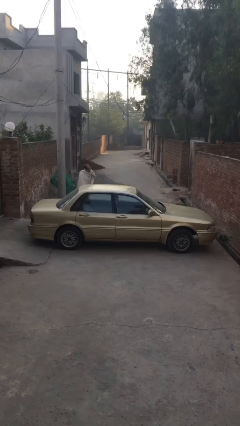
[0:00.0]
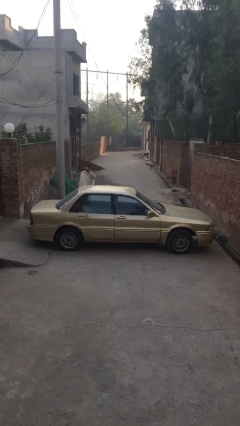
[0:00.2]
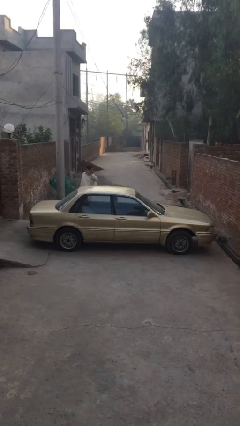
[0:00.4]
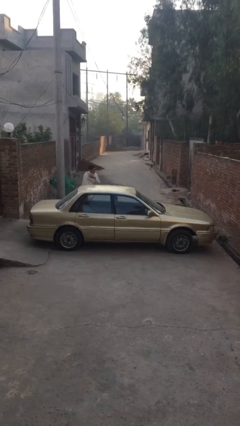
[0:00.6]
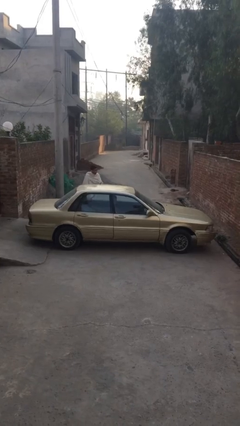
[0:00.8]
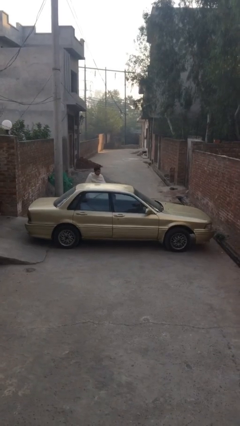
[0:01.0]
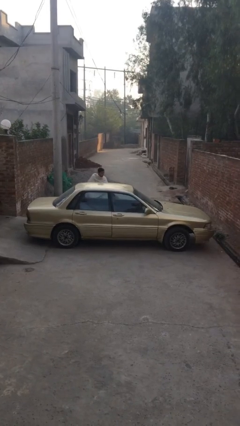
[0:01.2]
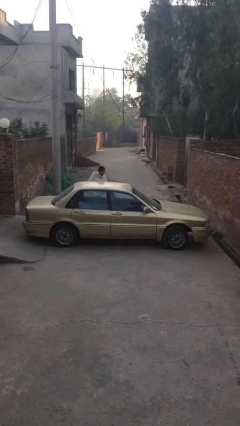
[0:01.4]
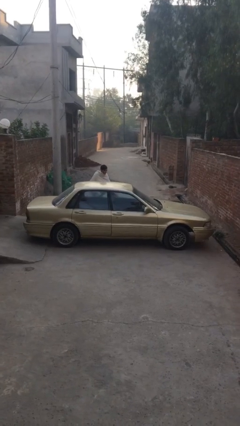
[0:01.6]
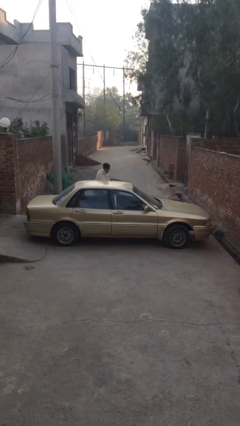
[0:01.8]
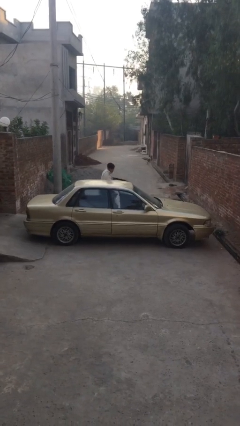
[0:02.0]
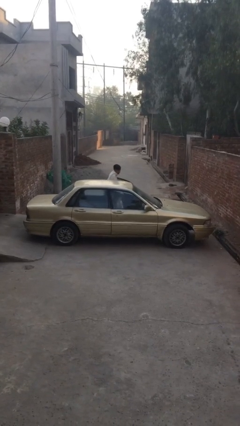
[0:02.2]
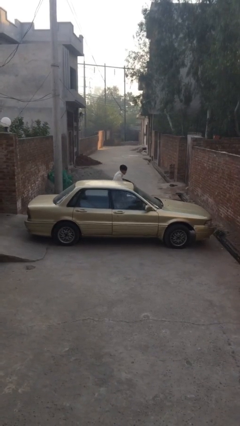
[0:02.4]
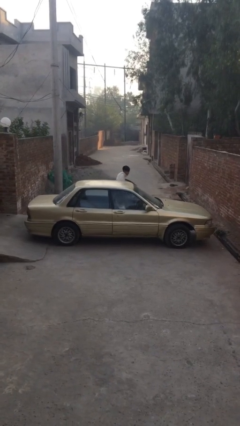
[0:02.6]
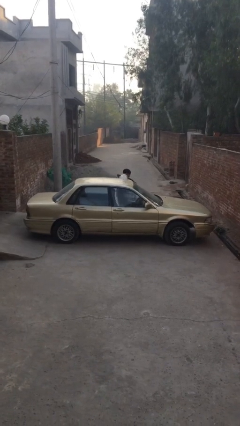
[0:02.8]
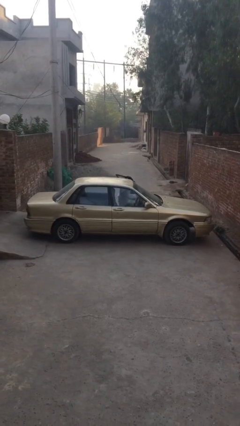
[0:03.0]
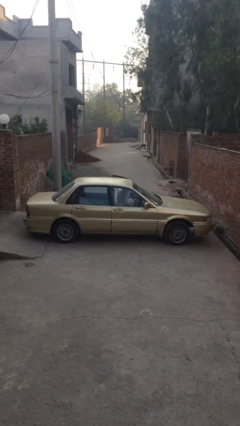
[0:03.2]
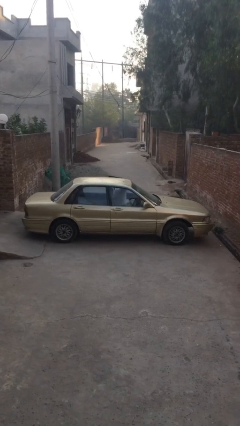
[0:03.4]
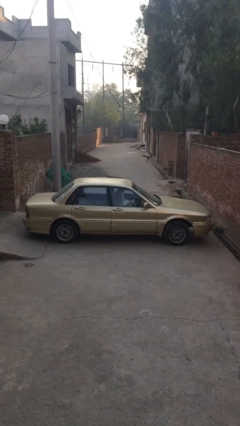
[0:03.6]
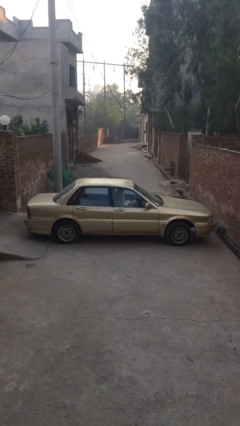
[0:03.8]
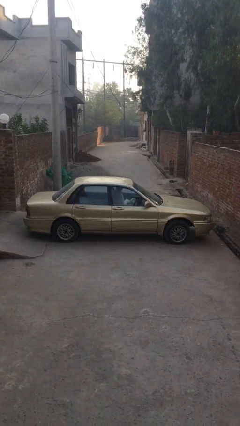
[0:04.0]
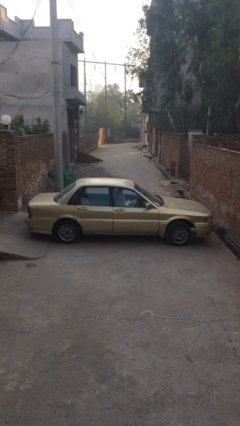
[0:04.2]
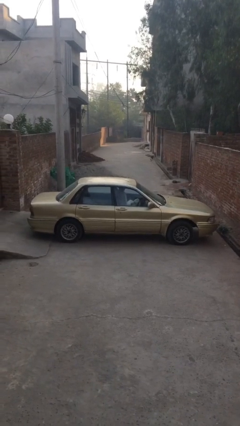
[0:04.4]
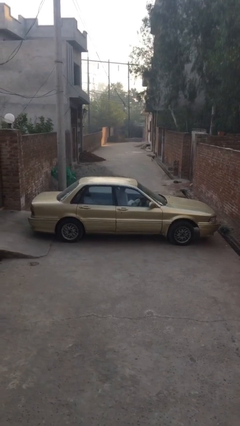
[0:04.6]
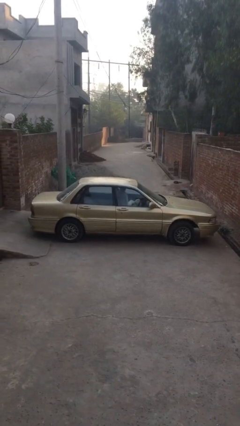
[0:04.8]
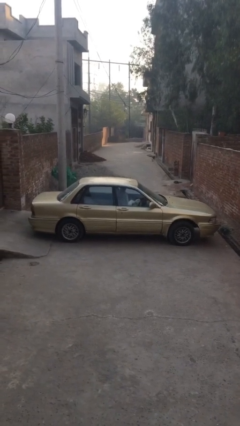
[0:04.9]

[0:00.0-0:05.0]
car picks up person

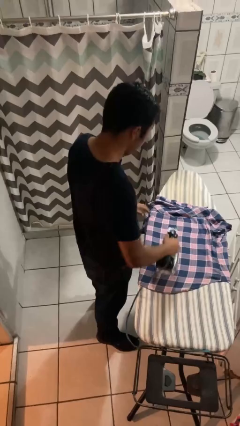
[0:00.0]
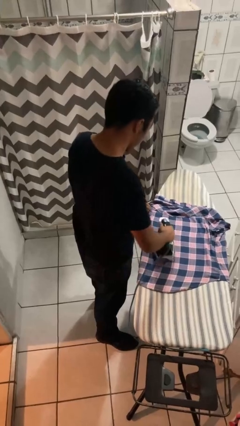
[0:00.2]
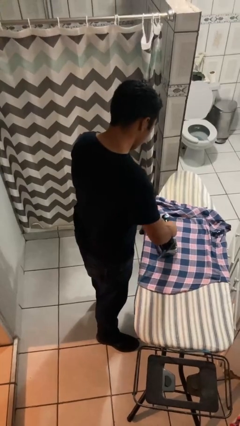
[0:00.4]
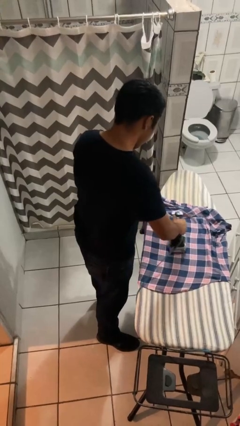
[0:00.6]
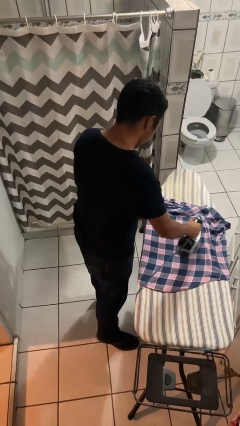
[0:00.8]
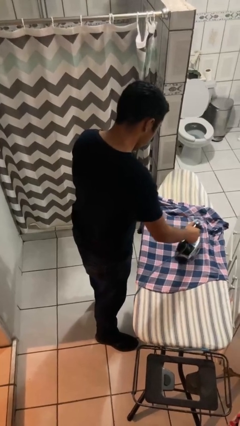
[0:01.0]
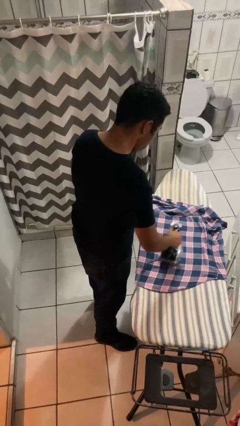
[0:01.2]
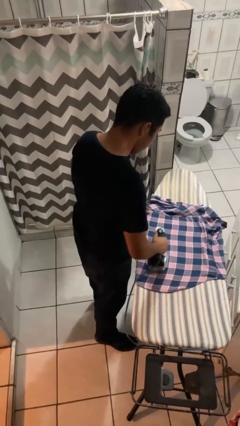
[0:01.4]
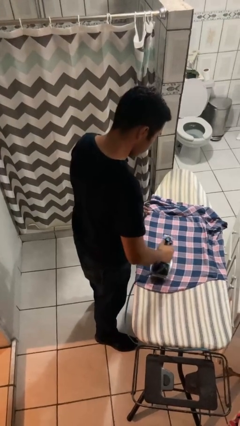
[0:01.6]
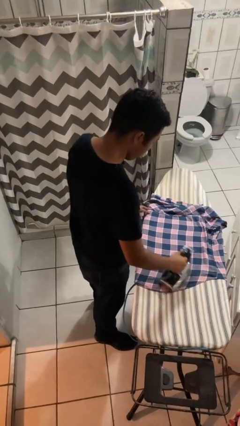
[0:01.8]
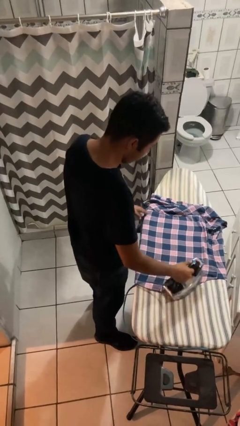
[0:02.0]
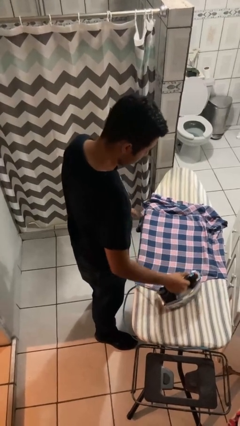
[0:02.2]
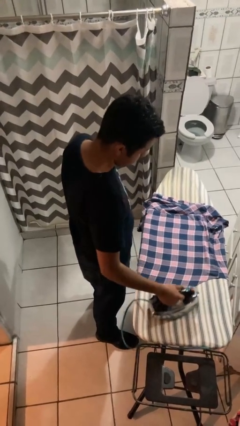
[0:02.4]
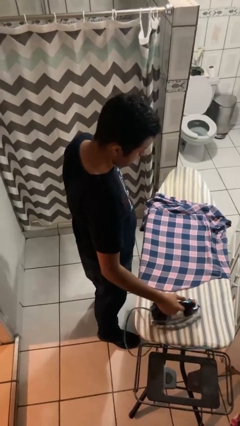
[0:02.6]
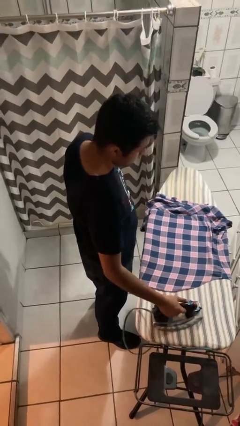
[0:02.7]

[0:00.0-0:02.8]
person irons clothes

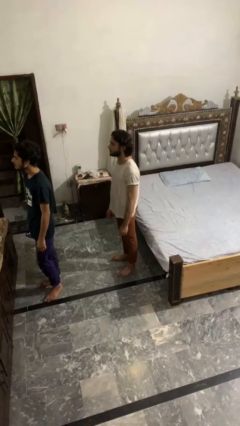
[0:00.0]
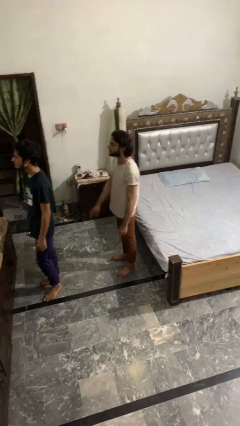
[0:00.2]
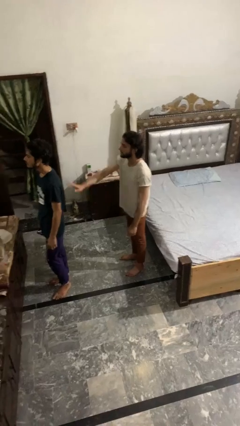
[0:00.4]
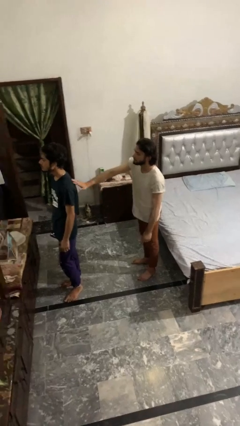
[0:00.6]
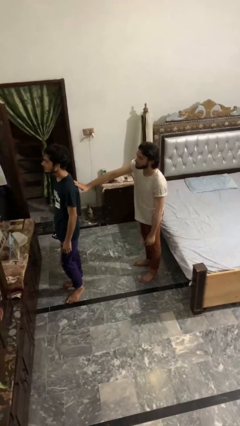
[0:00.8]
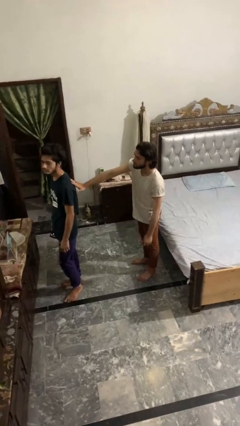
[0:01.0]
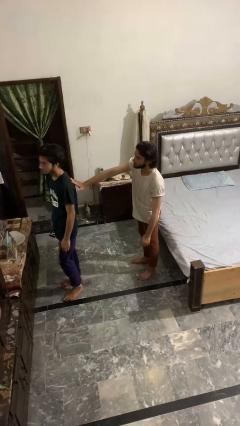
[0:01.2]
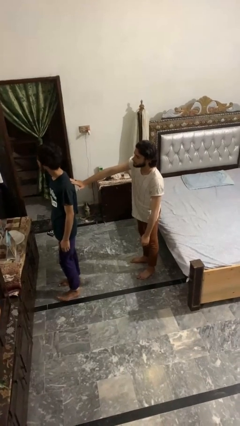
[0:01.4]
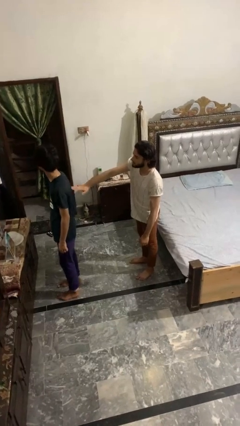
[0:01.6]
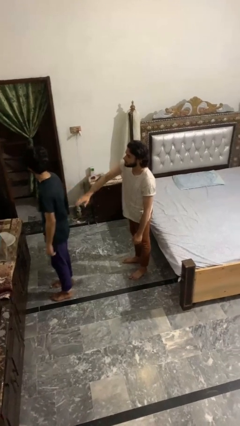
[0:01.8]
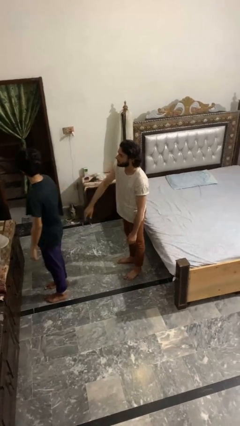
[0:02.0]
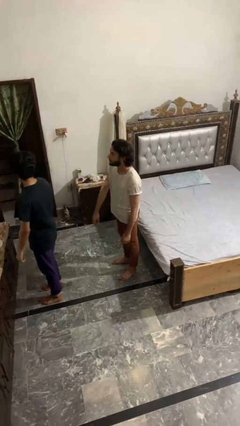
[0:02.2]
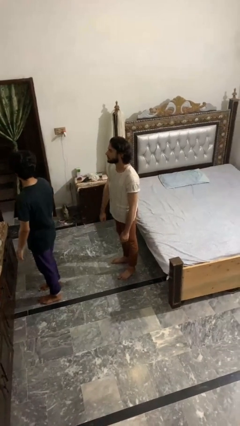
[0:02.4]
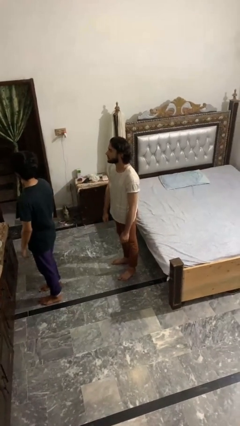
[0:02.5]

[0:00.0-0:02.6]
person touches back of person

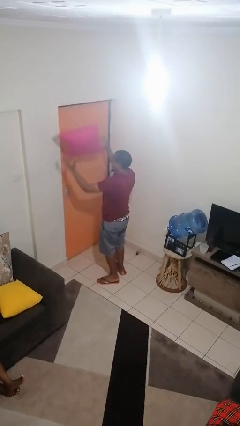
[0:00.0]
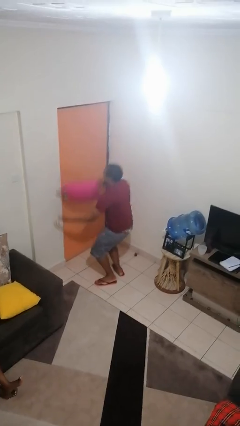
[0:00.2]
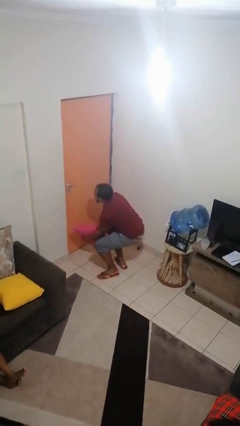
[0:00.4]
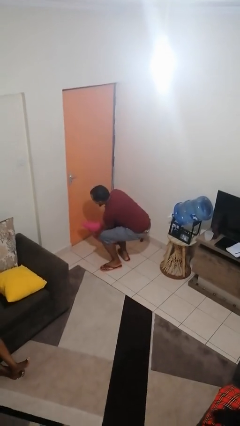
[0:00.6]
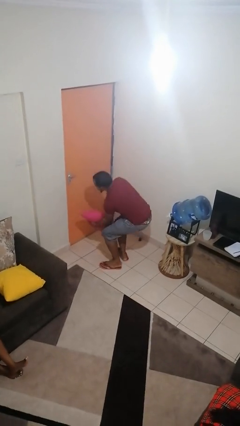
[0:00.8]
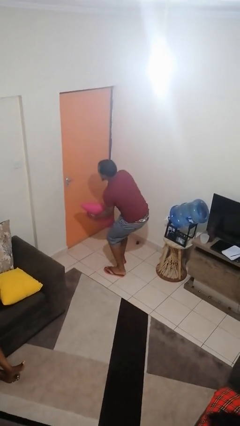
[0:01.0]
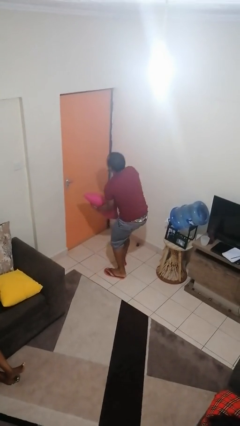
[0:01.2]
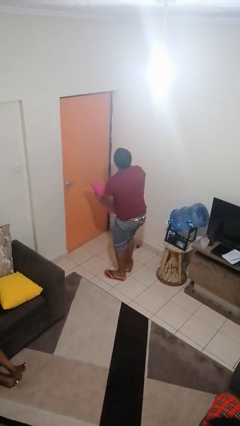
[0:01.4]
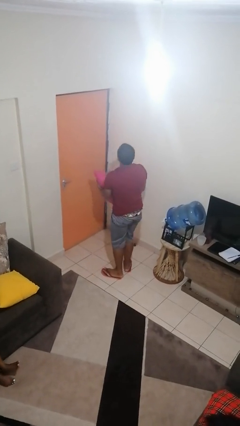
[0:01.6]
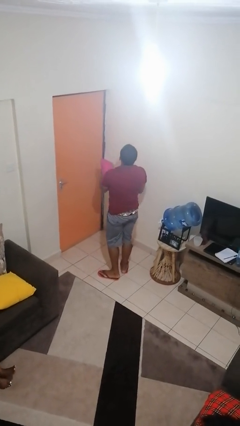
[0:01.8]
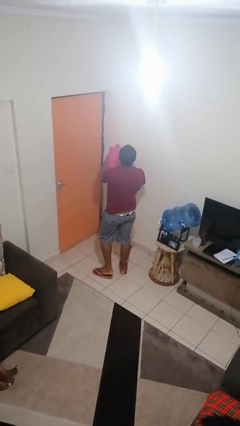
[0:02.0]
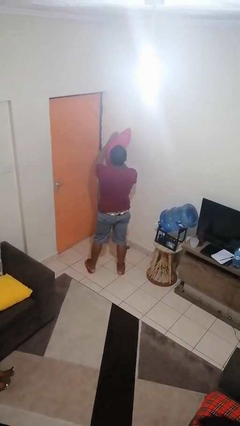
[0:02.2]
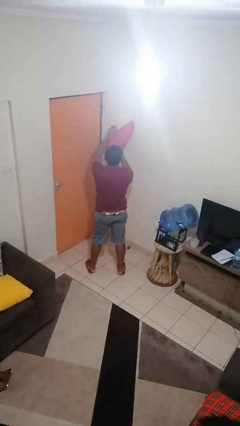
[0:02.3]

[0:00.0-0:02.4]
person catches dropped object

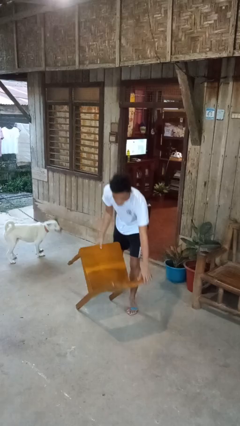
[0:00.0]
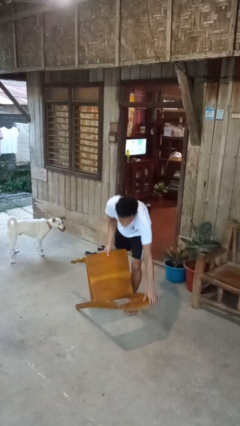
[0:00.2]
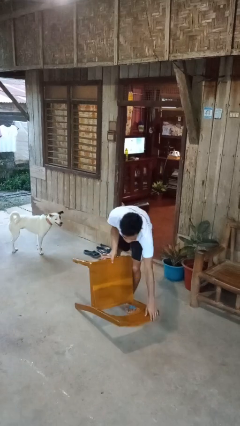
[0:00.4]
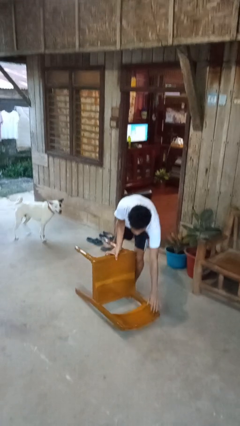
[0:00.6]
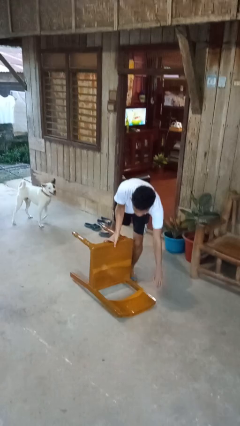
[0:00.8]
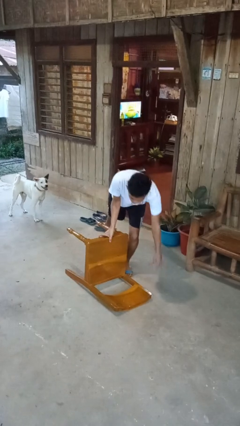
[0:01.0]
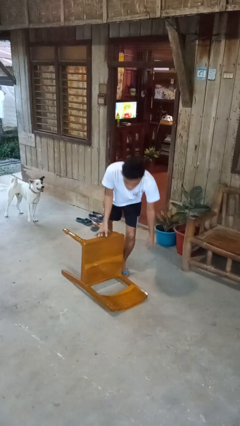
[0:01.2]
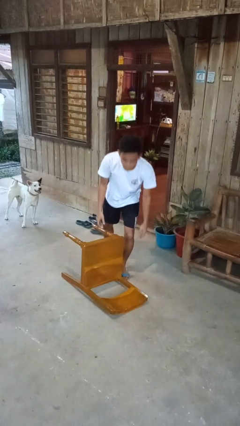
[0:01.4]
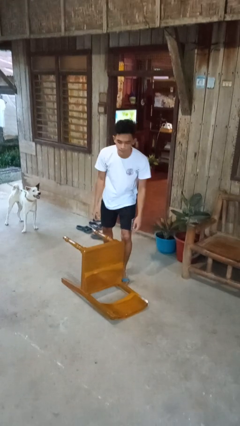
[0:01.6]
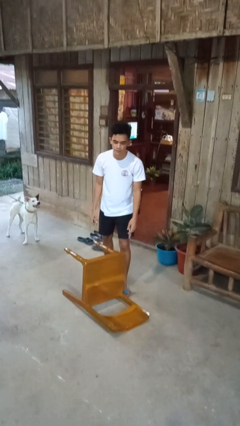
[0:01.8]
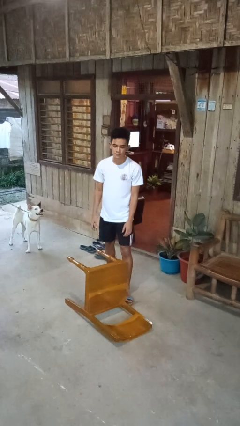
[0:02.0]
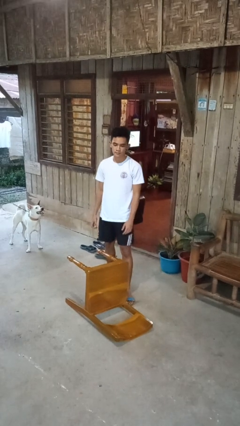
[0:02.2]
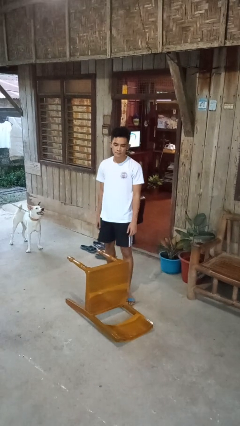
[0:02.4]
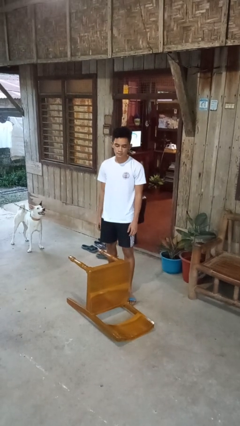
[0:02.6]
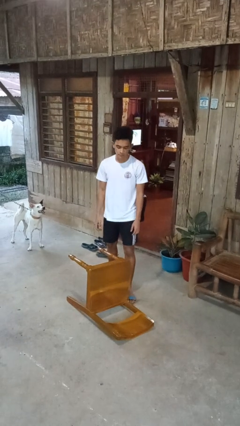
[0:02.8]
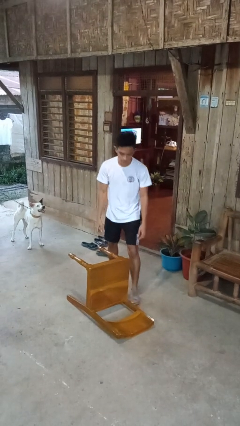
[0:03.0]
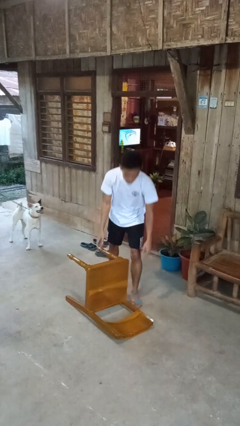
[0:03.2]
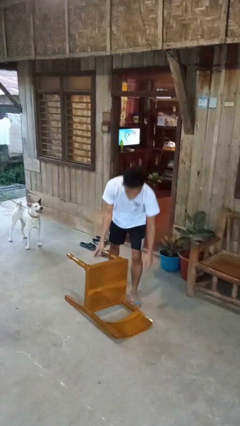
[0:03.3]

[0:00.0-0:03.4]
person knocks over furniture

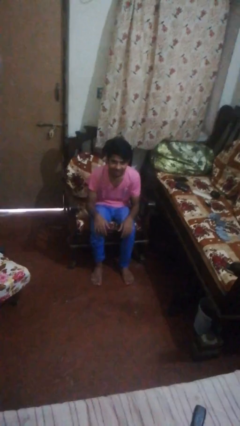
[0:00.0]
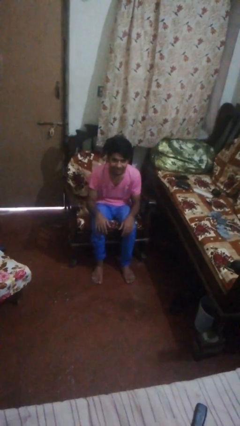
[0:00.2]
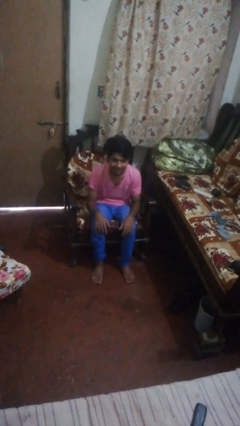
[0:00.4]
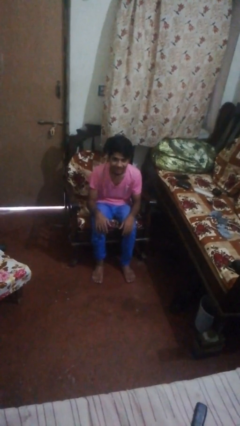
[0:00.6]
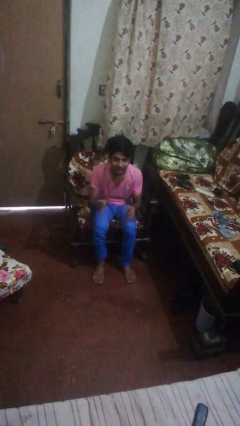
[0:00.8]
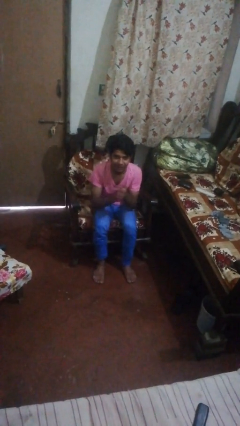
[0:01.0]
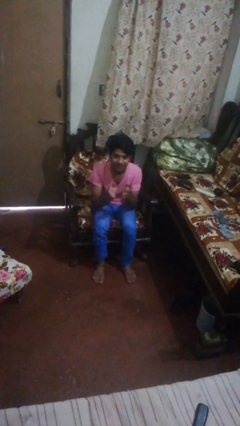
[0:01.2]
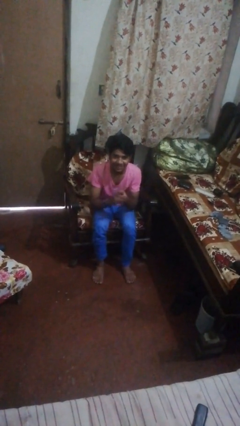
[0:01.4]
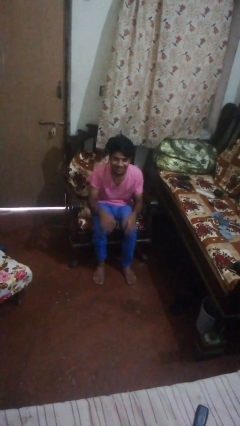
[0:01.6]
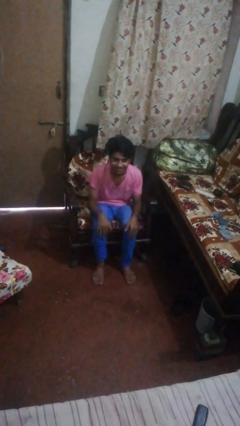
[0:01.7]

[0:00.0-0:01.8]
person claps hands
